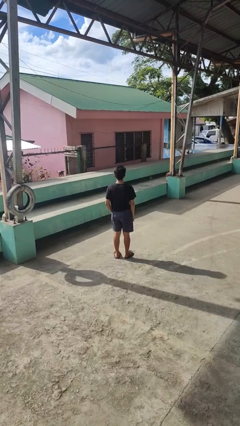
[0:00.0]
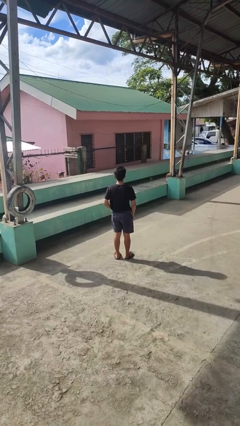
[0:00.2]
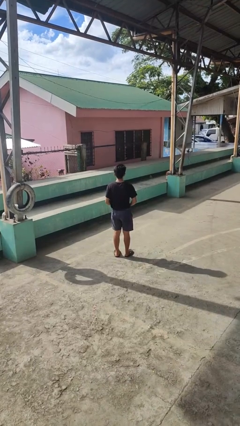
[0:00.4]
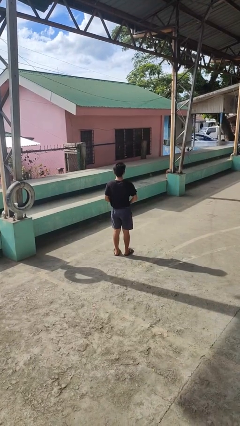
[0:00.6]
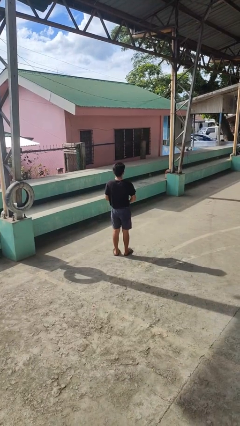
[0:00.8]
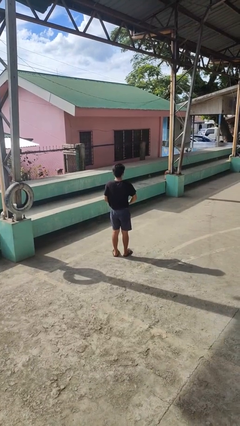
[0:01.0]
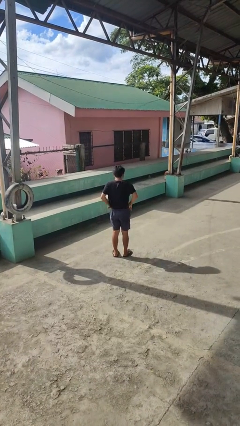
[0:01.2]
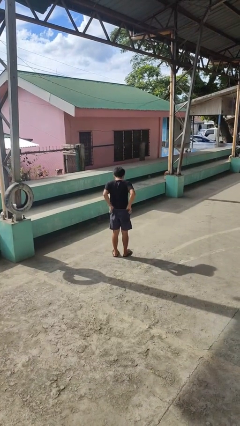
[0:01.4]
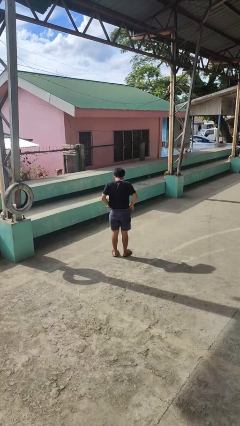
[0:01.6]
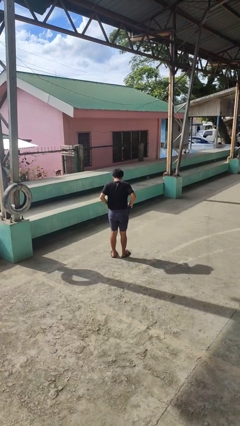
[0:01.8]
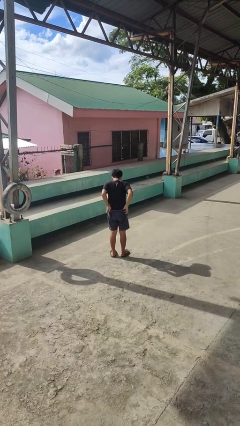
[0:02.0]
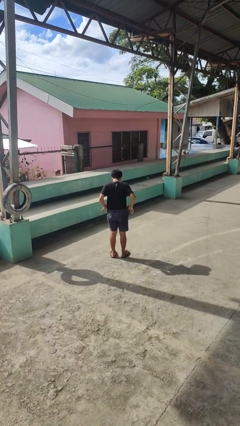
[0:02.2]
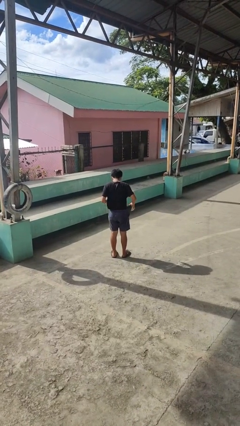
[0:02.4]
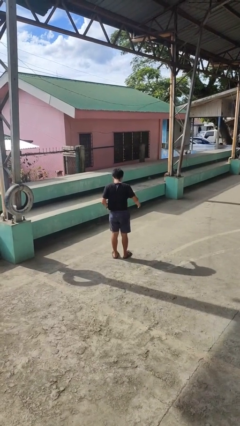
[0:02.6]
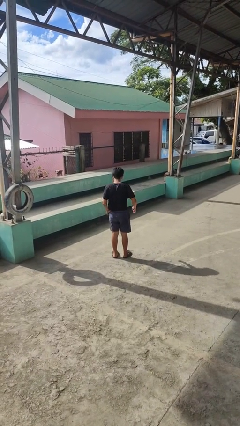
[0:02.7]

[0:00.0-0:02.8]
person hikes up pants

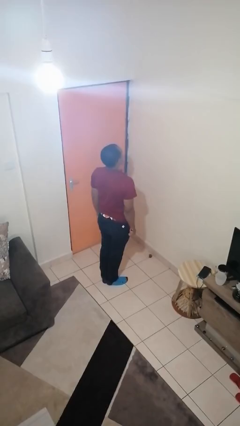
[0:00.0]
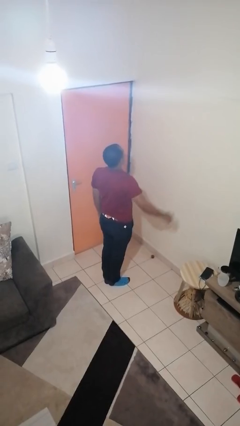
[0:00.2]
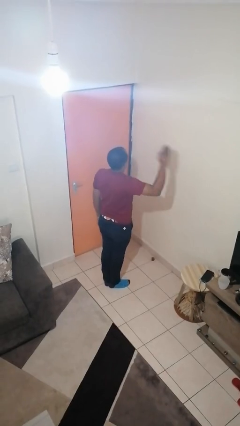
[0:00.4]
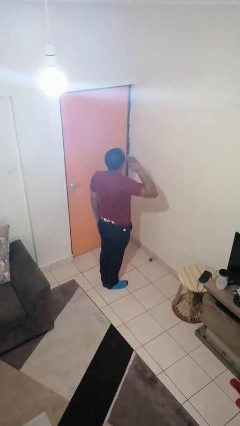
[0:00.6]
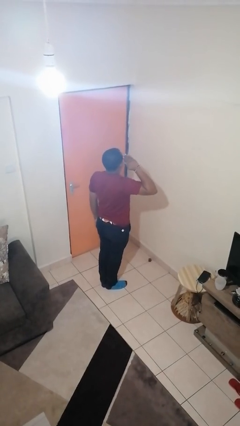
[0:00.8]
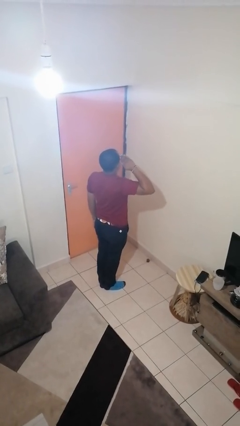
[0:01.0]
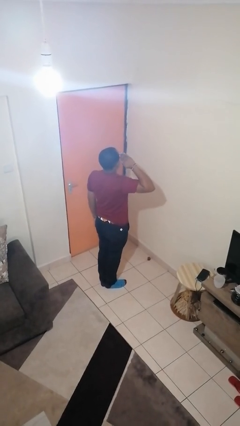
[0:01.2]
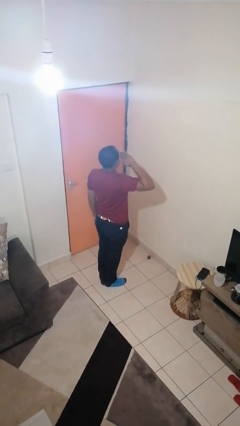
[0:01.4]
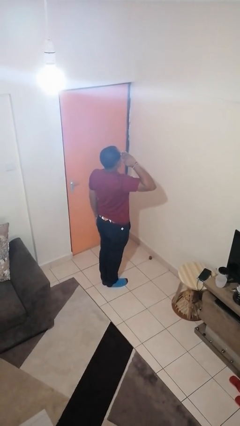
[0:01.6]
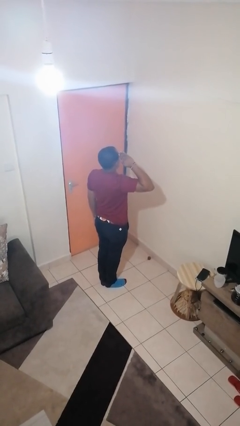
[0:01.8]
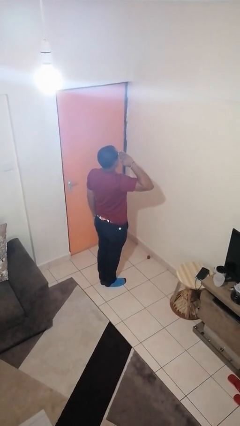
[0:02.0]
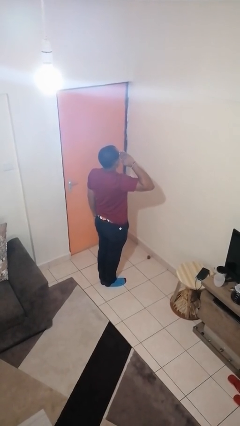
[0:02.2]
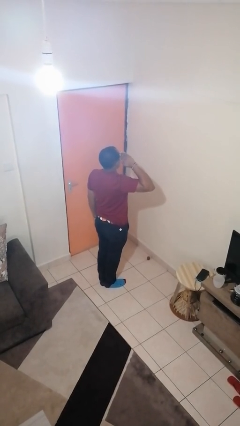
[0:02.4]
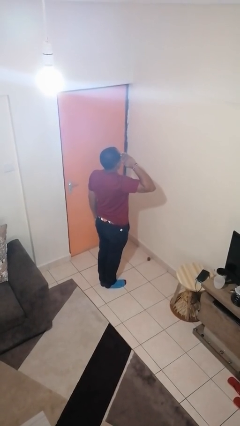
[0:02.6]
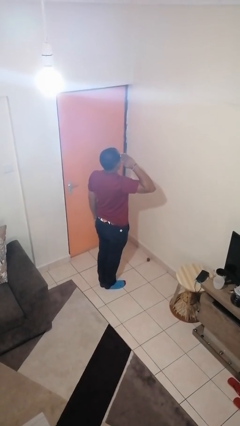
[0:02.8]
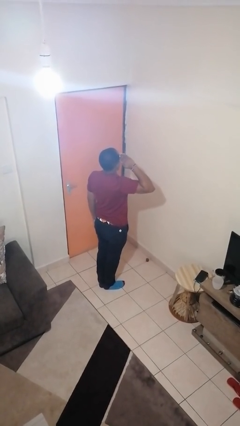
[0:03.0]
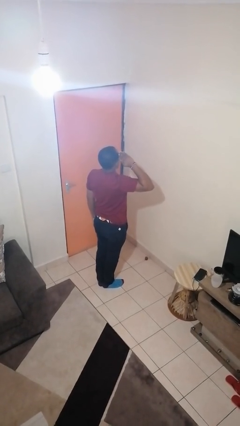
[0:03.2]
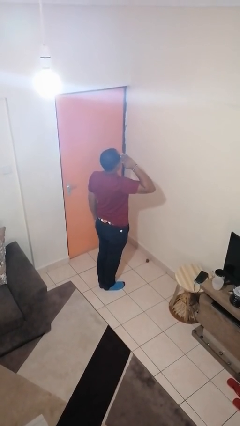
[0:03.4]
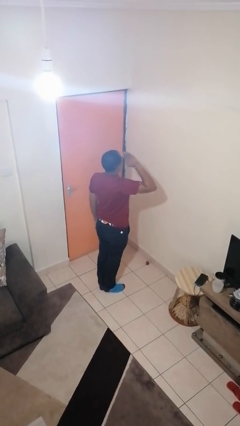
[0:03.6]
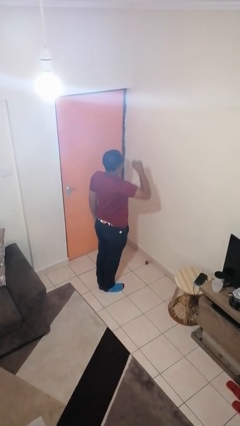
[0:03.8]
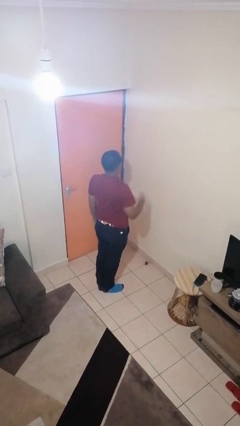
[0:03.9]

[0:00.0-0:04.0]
person salutes

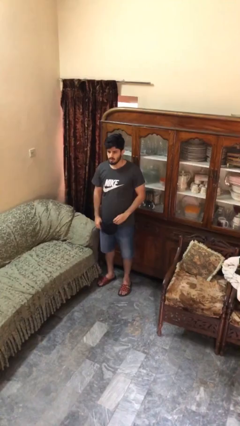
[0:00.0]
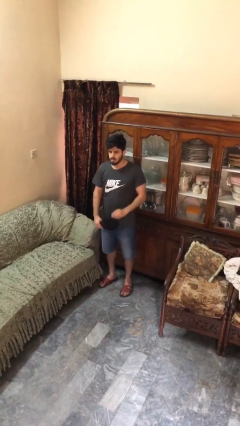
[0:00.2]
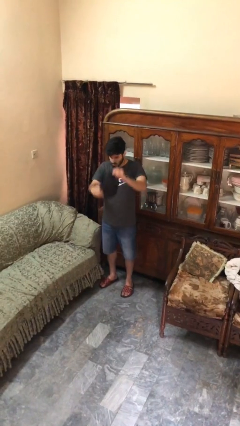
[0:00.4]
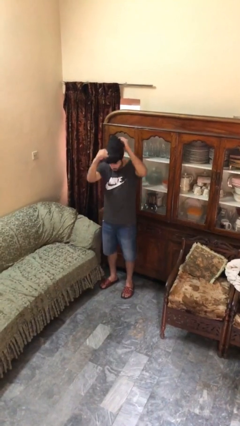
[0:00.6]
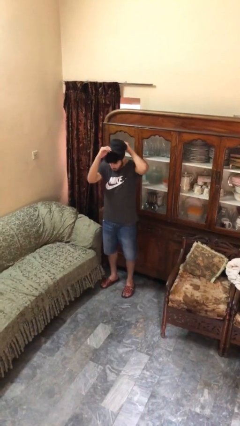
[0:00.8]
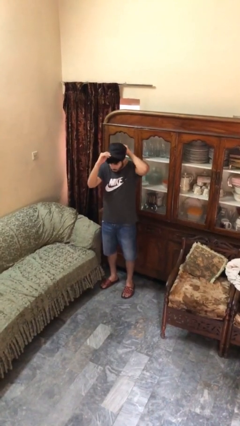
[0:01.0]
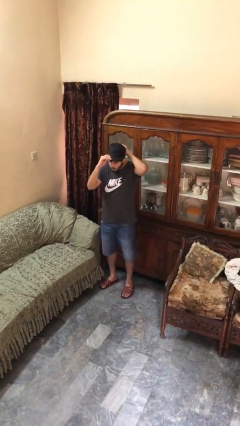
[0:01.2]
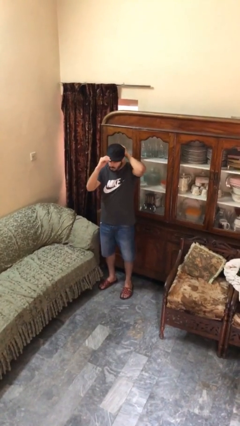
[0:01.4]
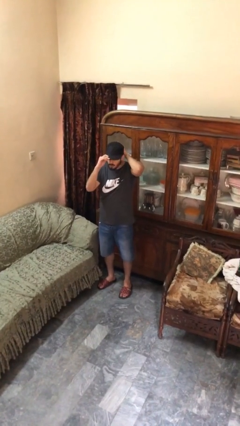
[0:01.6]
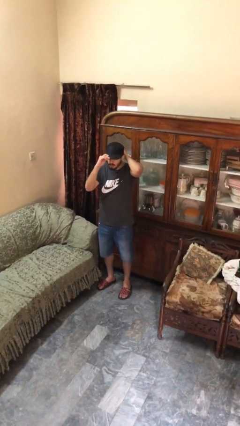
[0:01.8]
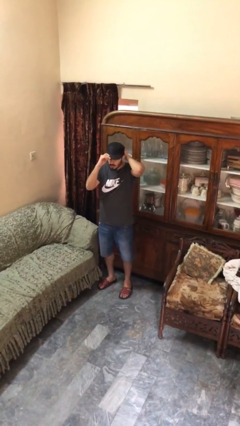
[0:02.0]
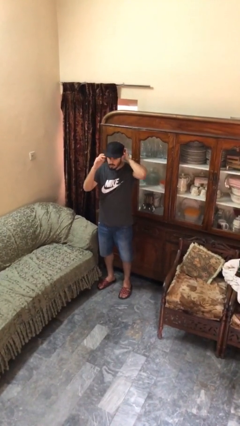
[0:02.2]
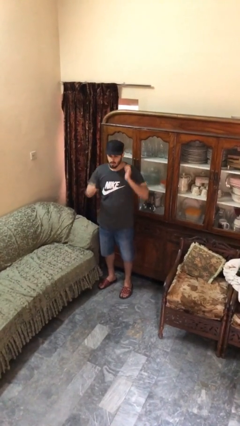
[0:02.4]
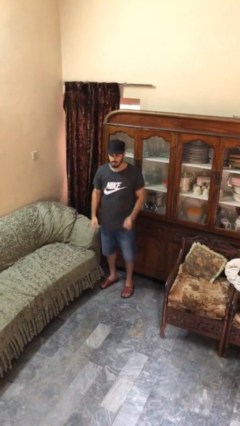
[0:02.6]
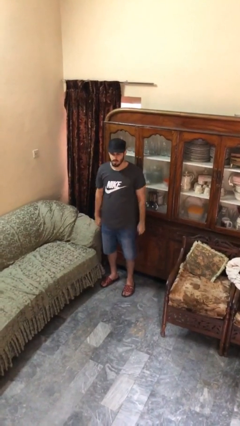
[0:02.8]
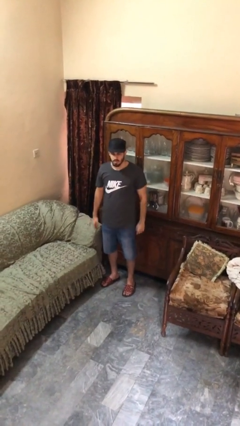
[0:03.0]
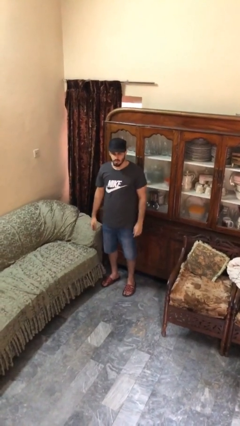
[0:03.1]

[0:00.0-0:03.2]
person puts on hat

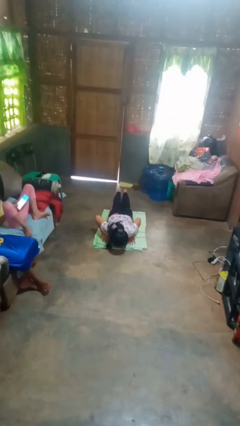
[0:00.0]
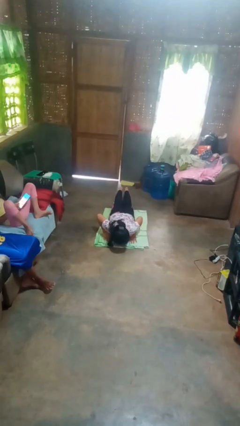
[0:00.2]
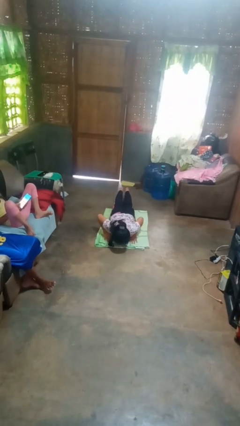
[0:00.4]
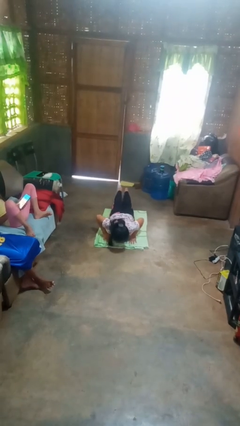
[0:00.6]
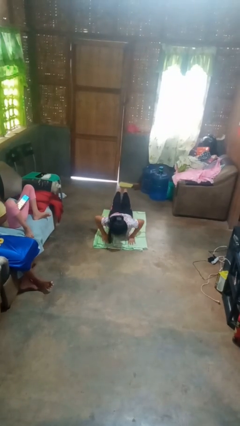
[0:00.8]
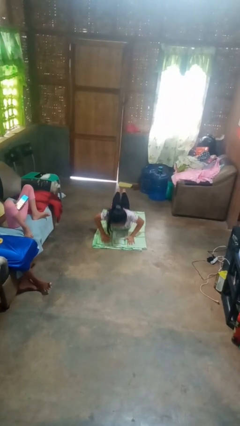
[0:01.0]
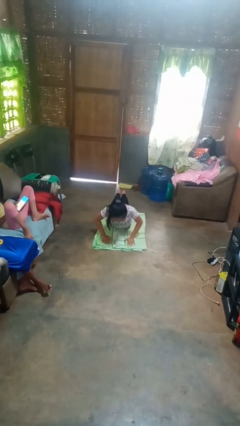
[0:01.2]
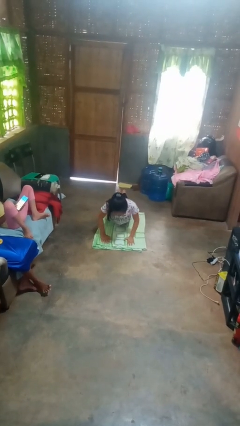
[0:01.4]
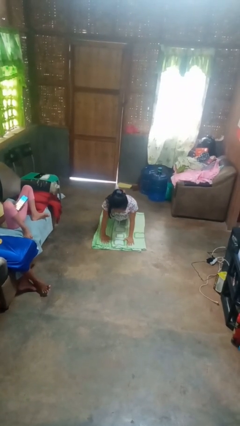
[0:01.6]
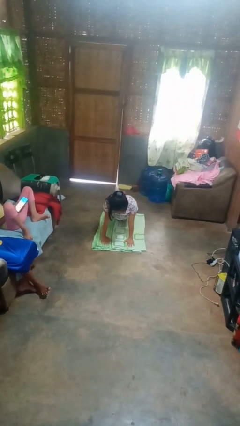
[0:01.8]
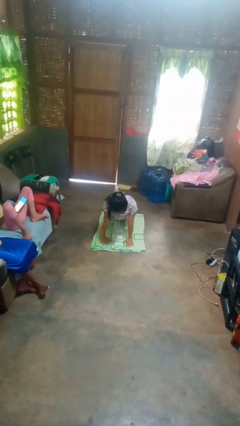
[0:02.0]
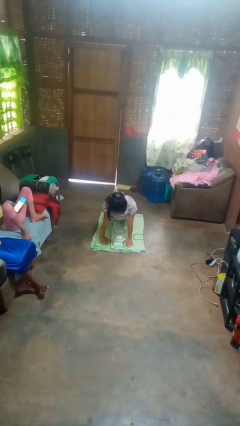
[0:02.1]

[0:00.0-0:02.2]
person exercises with pushup

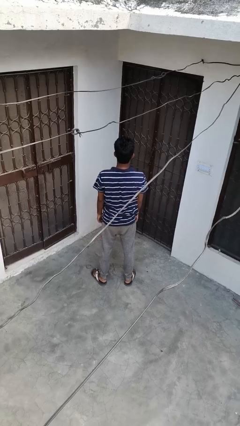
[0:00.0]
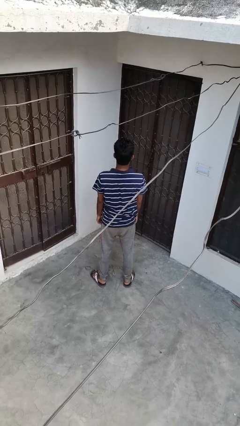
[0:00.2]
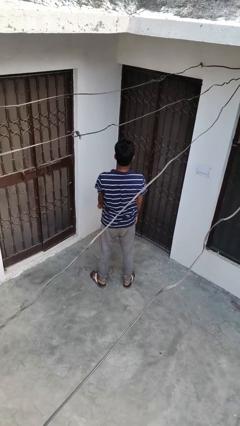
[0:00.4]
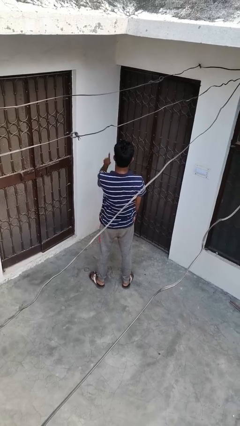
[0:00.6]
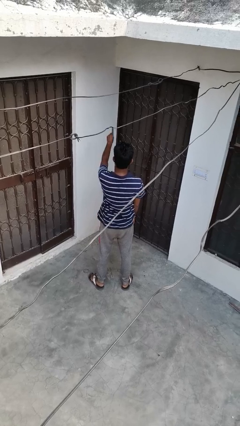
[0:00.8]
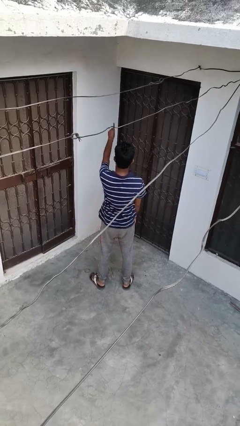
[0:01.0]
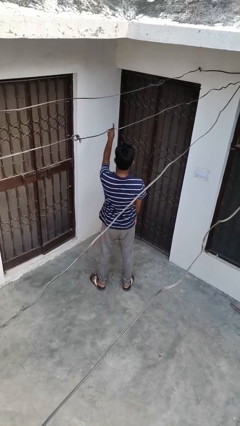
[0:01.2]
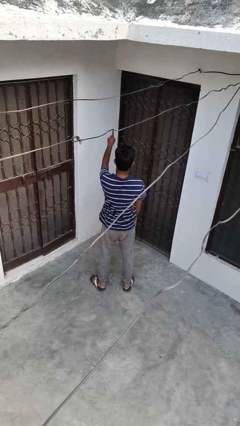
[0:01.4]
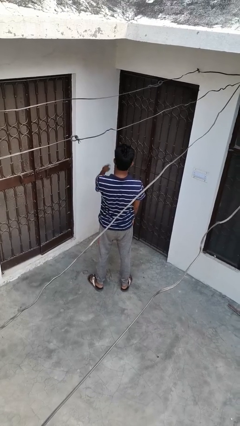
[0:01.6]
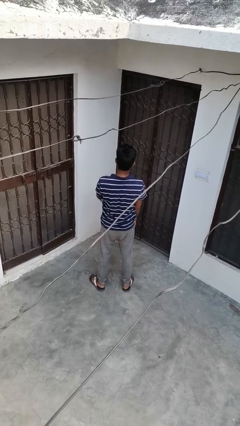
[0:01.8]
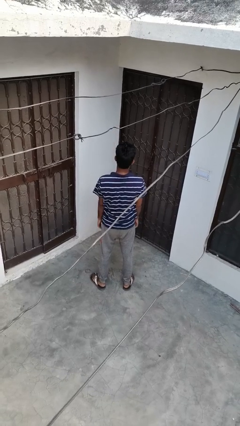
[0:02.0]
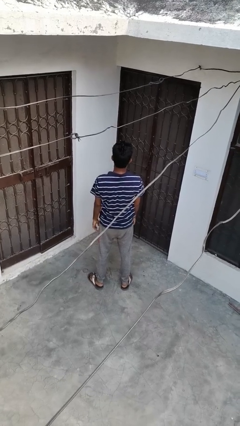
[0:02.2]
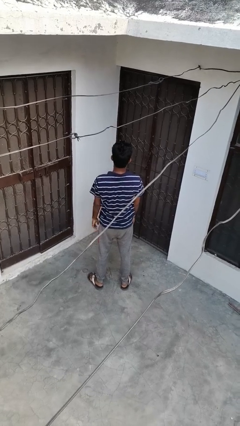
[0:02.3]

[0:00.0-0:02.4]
person gestures number one

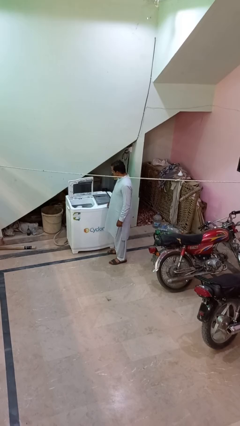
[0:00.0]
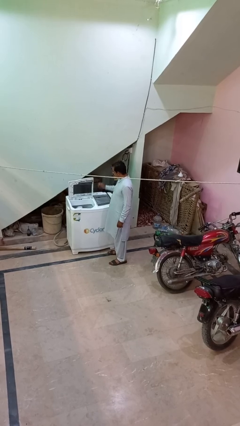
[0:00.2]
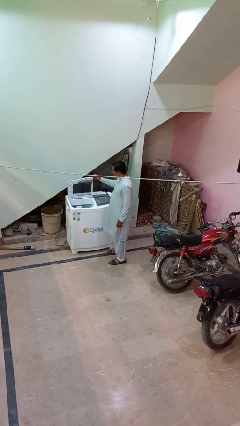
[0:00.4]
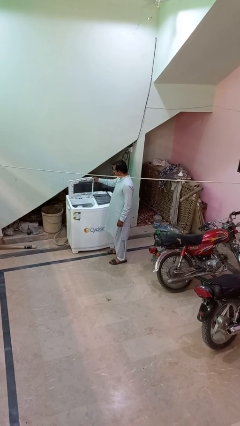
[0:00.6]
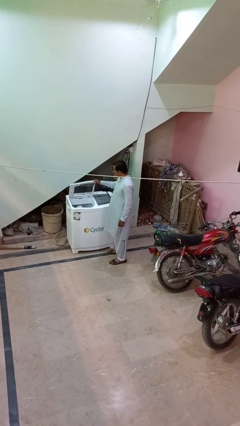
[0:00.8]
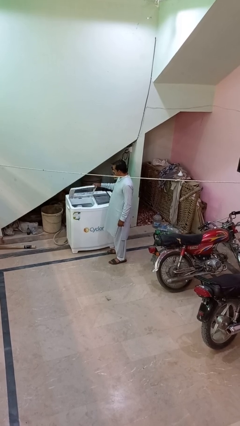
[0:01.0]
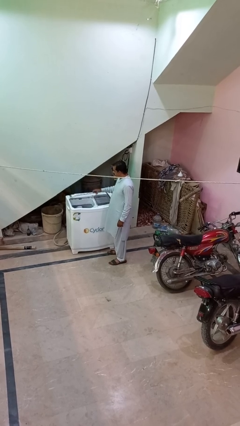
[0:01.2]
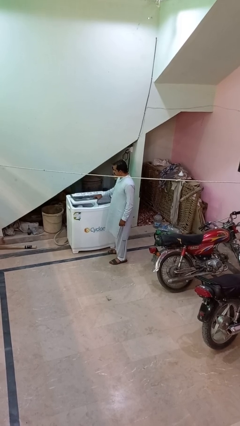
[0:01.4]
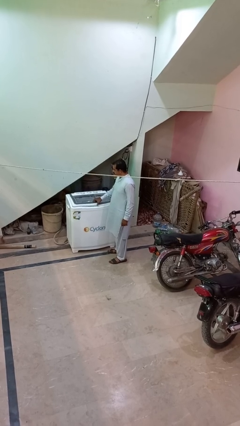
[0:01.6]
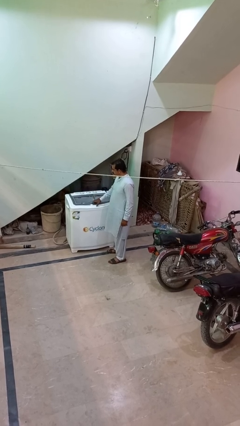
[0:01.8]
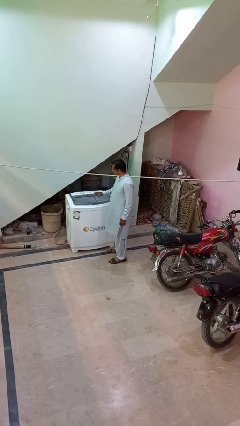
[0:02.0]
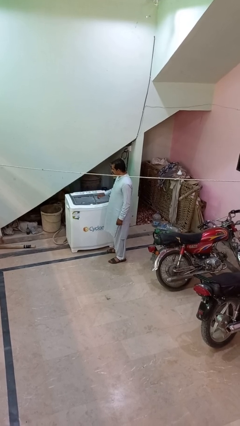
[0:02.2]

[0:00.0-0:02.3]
person closes clothes washer
